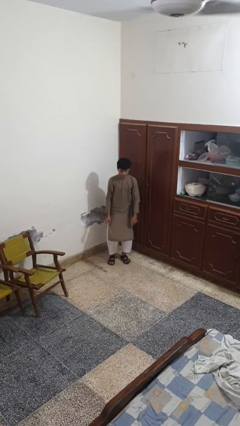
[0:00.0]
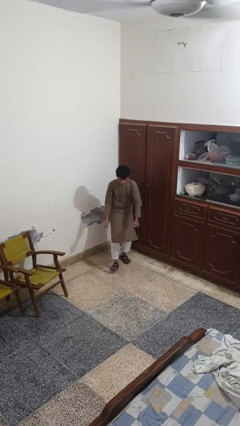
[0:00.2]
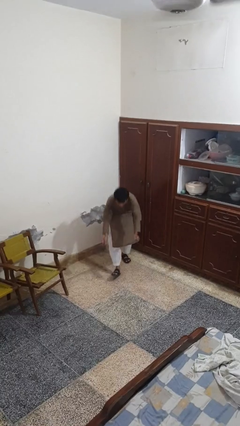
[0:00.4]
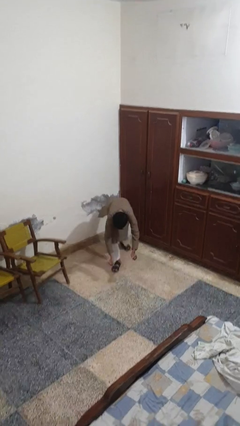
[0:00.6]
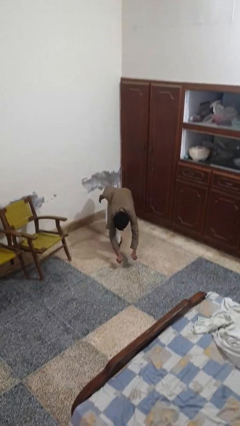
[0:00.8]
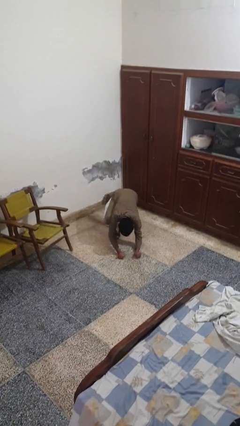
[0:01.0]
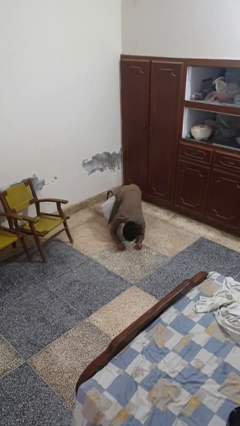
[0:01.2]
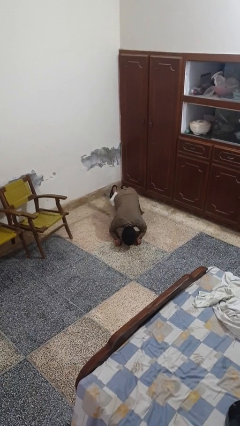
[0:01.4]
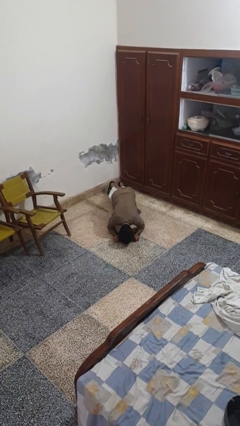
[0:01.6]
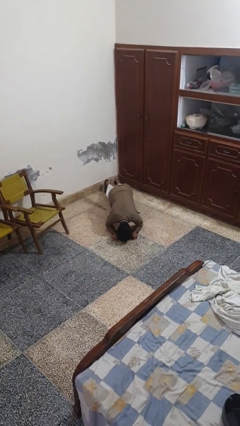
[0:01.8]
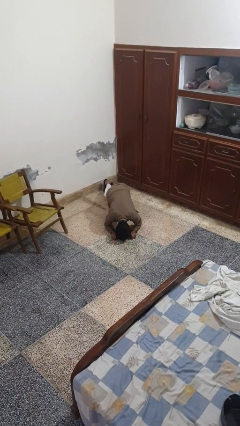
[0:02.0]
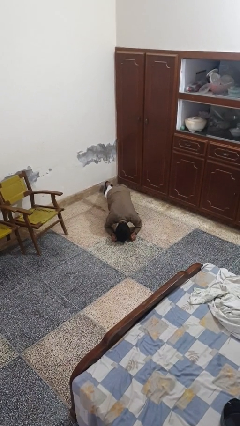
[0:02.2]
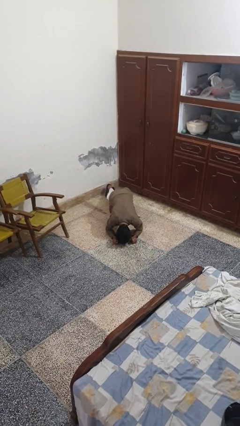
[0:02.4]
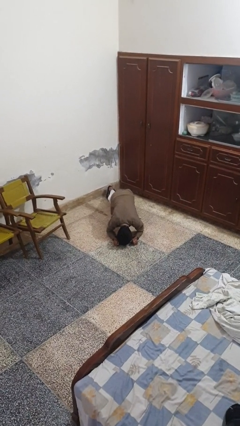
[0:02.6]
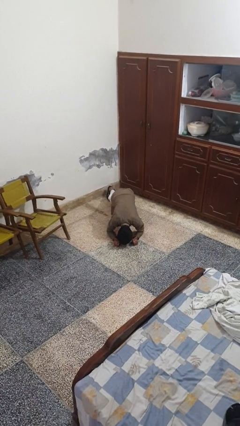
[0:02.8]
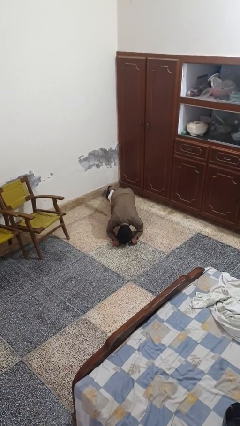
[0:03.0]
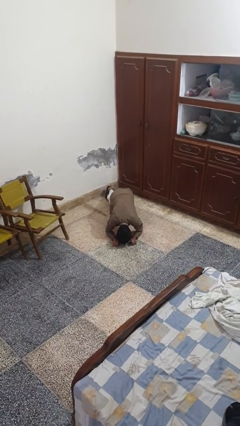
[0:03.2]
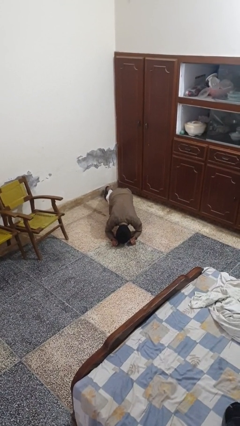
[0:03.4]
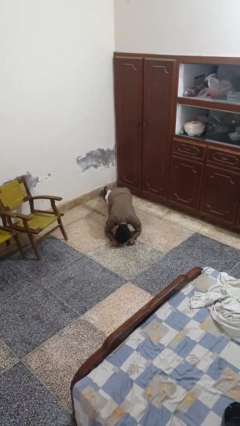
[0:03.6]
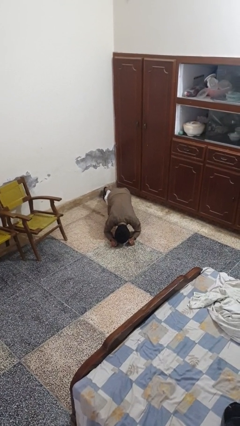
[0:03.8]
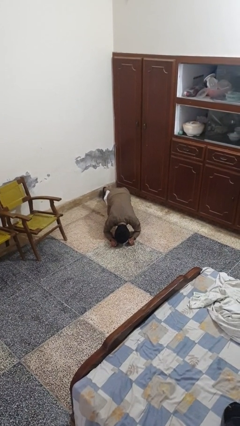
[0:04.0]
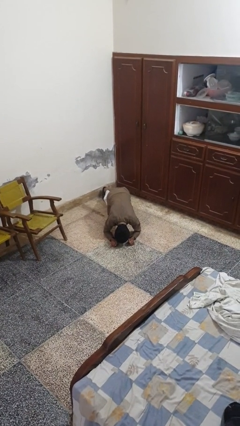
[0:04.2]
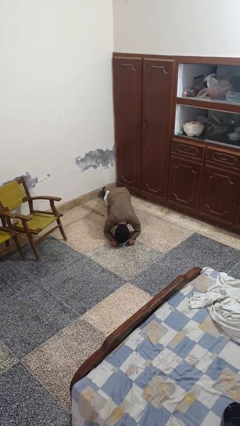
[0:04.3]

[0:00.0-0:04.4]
person exercises with plank

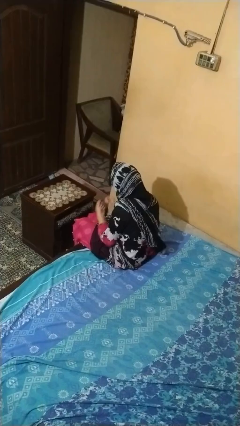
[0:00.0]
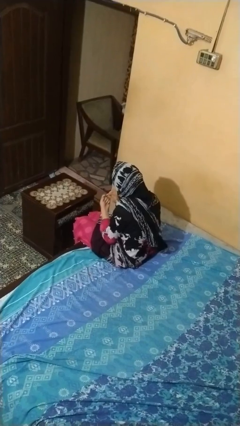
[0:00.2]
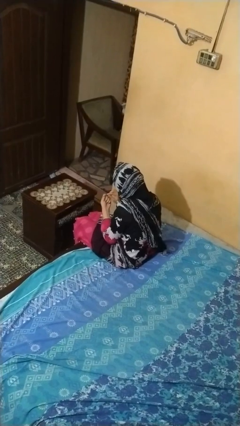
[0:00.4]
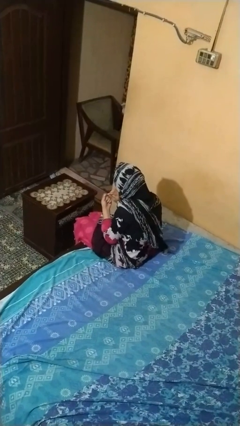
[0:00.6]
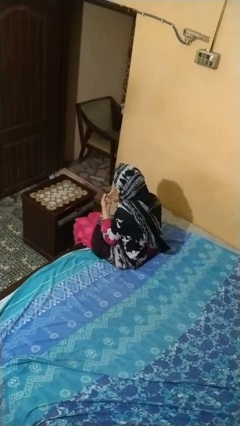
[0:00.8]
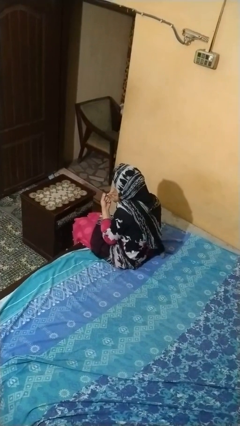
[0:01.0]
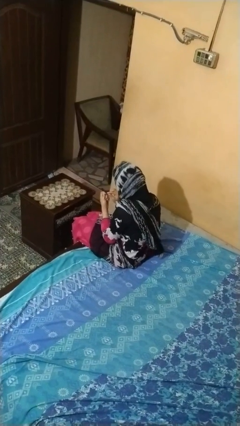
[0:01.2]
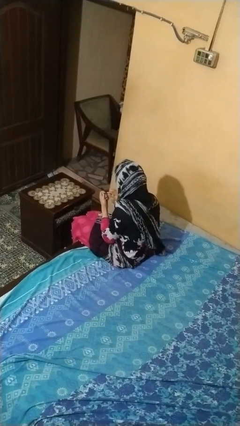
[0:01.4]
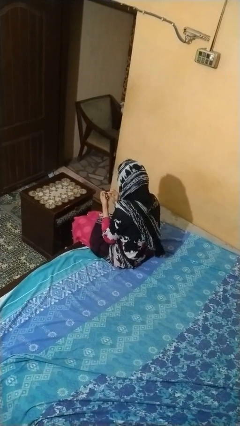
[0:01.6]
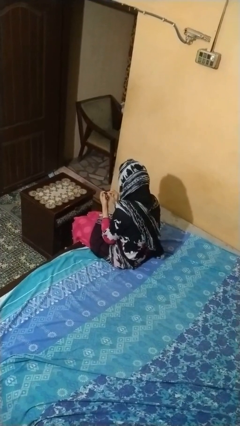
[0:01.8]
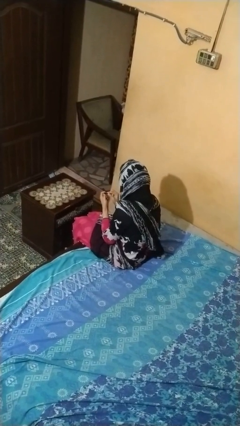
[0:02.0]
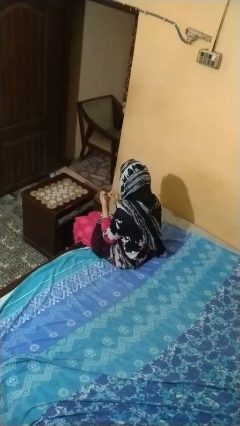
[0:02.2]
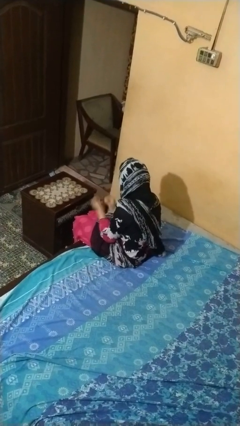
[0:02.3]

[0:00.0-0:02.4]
person files fingernails

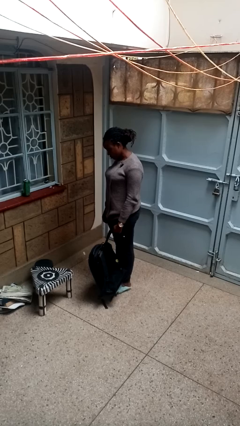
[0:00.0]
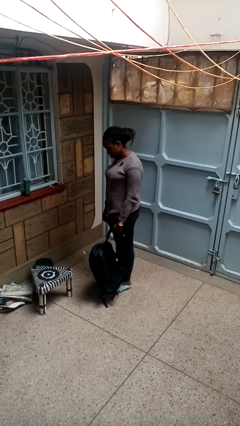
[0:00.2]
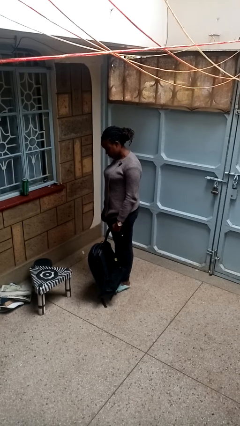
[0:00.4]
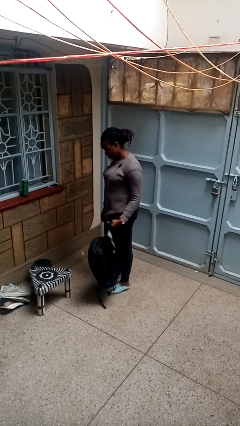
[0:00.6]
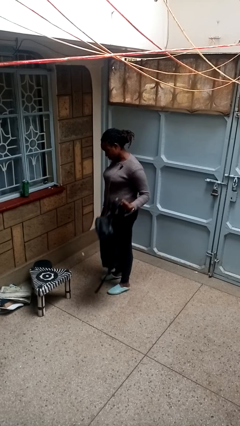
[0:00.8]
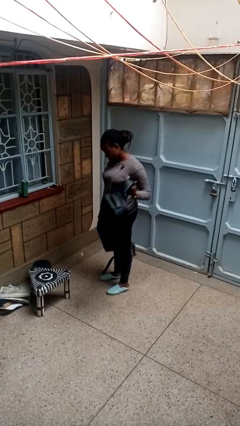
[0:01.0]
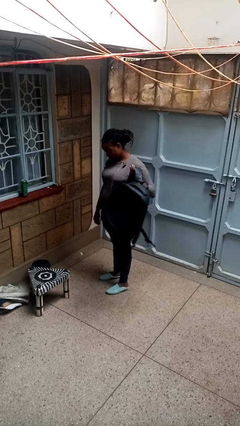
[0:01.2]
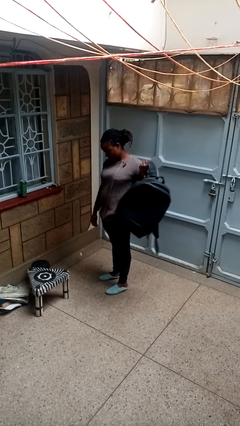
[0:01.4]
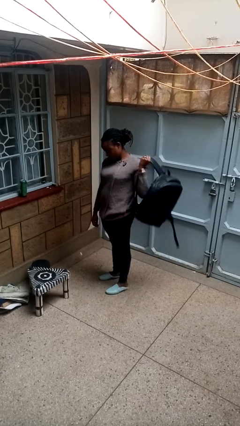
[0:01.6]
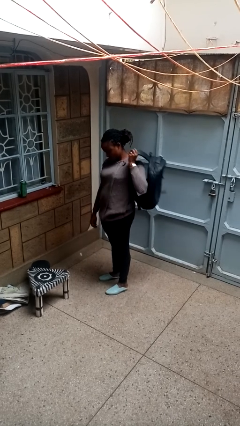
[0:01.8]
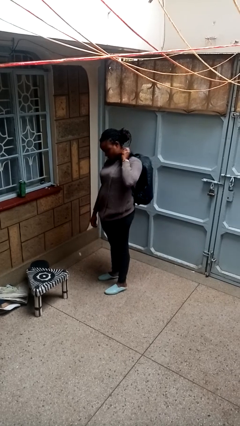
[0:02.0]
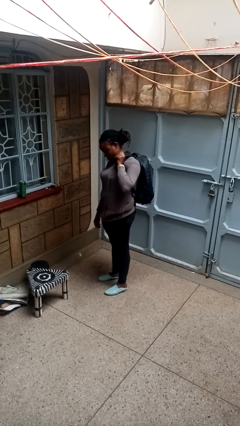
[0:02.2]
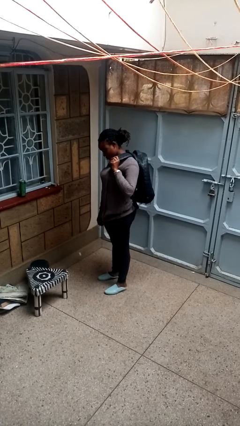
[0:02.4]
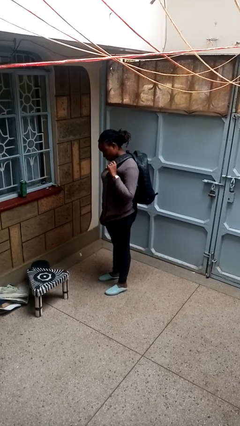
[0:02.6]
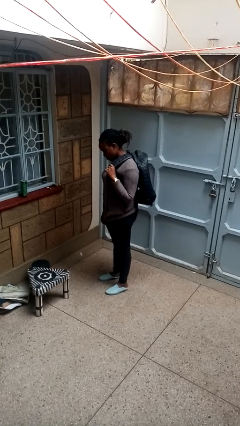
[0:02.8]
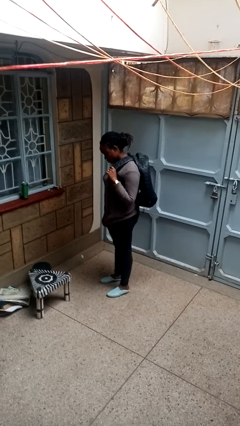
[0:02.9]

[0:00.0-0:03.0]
person puts on backpack

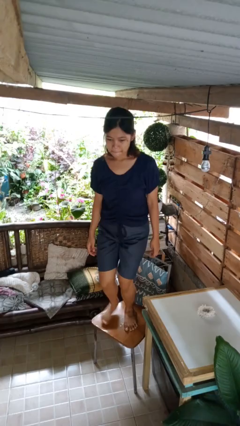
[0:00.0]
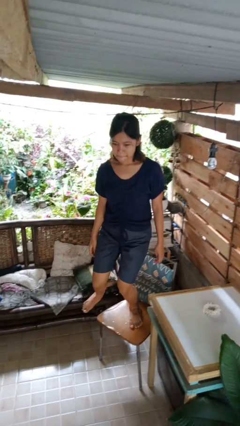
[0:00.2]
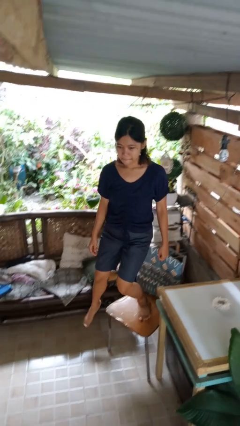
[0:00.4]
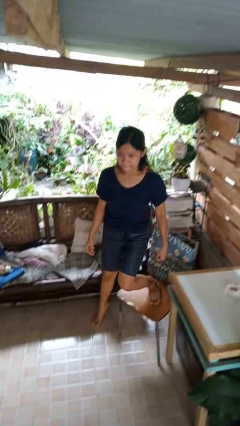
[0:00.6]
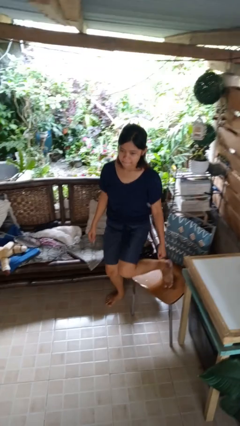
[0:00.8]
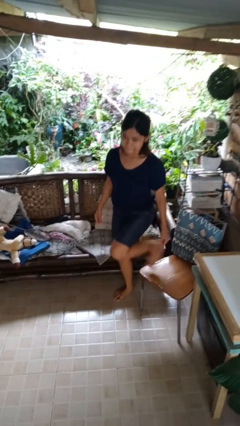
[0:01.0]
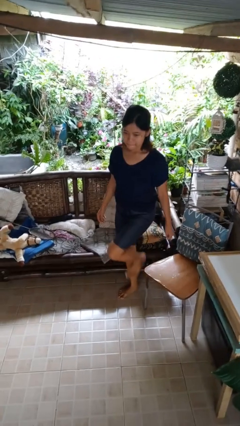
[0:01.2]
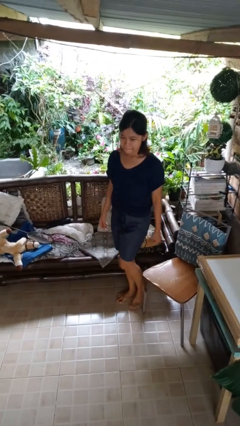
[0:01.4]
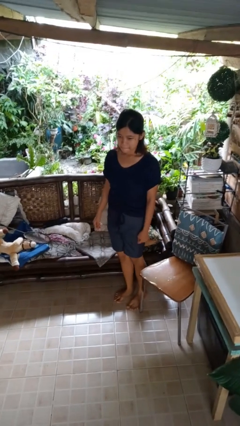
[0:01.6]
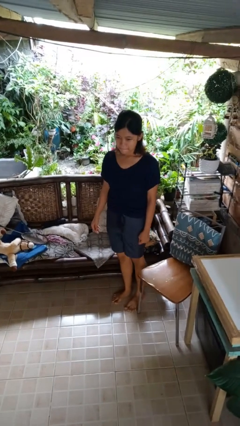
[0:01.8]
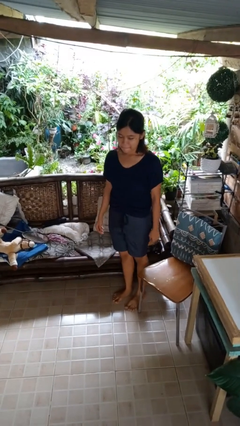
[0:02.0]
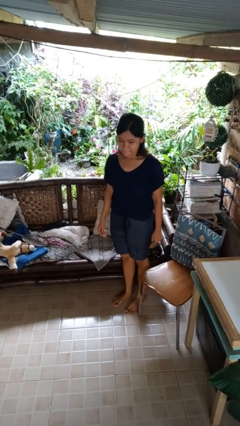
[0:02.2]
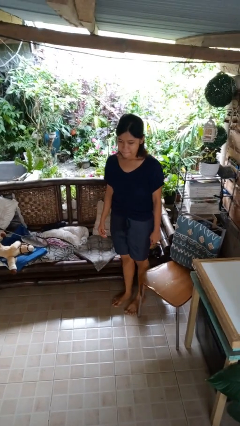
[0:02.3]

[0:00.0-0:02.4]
person climbs off chair

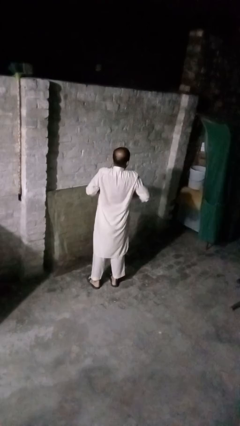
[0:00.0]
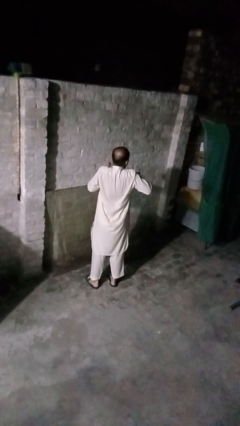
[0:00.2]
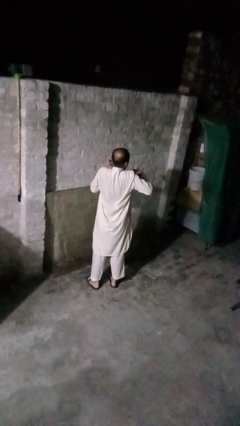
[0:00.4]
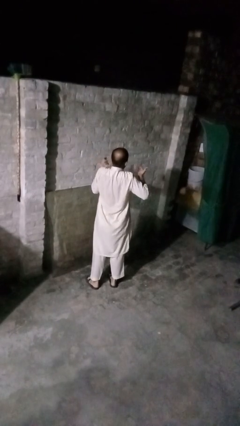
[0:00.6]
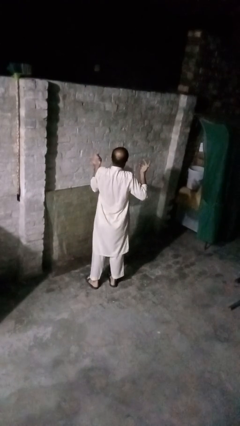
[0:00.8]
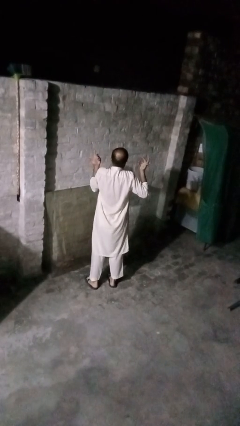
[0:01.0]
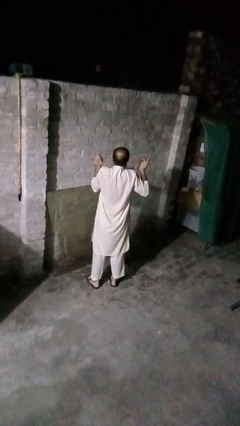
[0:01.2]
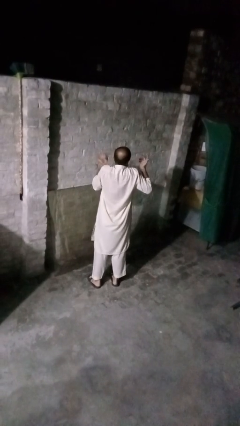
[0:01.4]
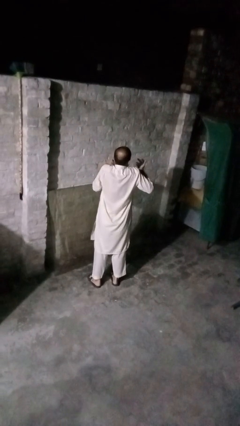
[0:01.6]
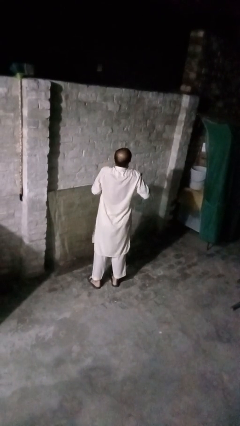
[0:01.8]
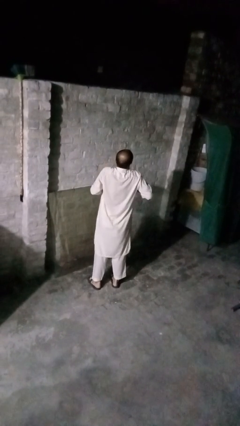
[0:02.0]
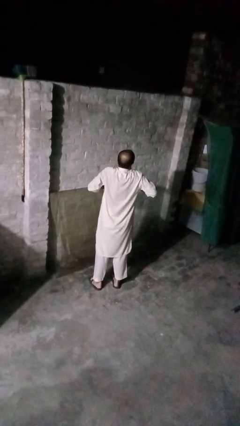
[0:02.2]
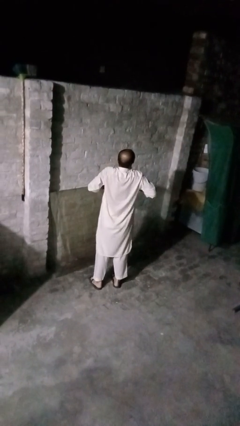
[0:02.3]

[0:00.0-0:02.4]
person shrugs

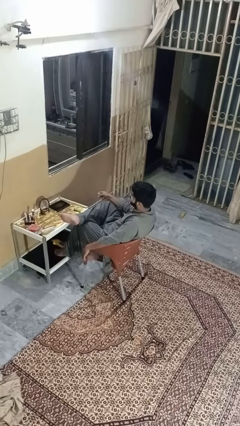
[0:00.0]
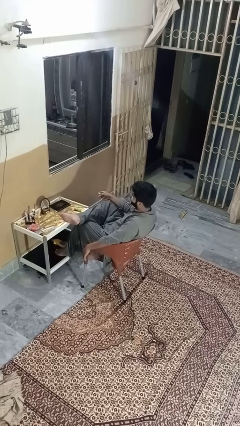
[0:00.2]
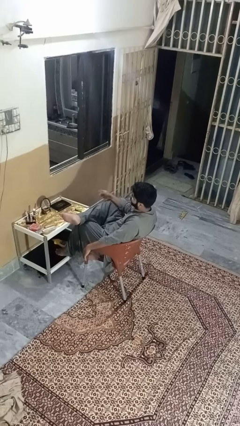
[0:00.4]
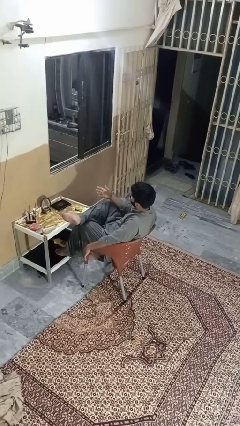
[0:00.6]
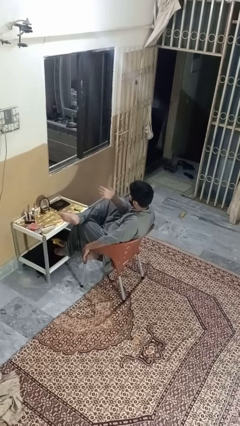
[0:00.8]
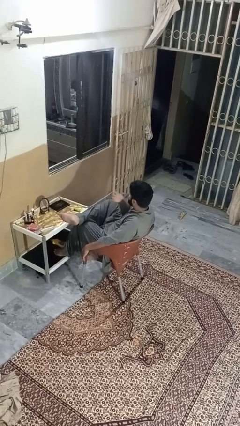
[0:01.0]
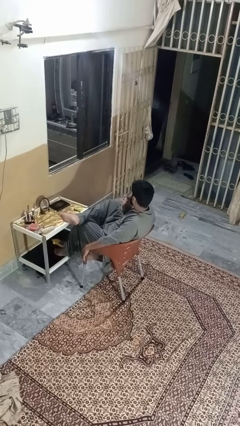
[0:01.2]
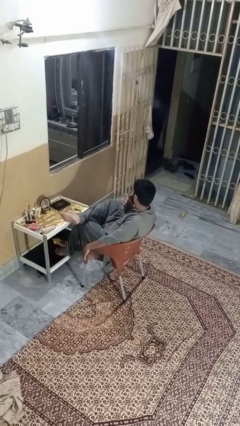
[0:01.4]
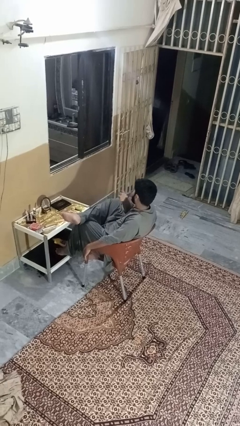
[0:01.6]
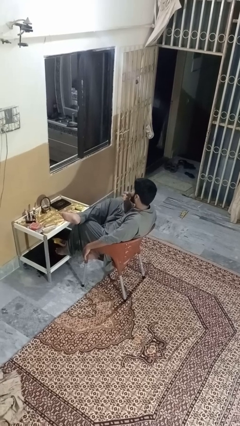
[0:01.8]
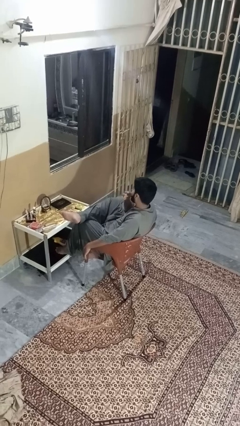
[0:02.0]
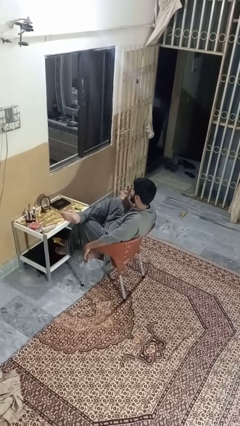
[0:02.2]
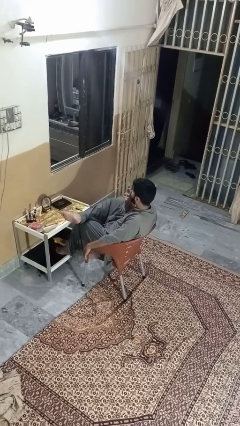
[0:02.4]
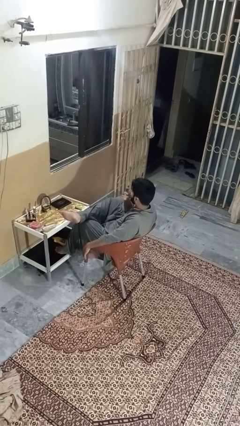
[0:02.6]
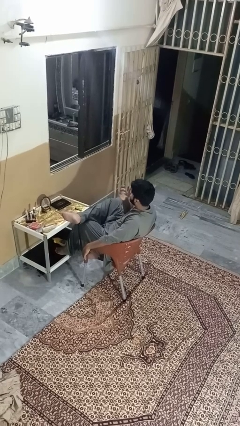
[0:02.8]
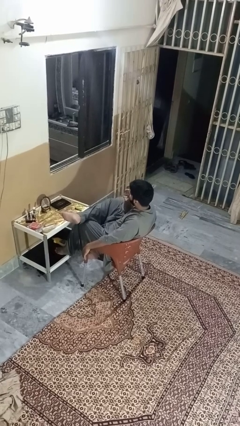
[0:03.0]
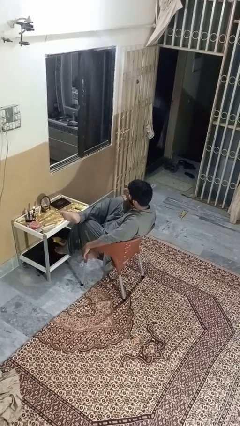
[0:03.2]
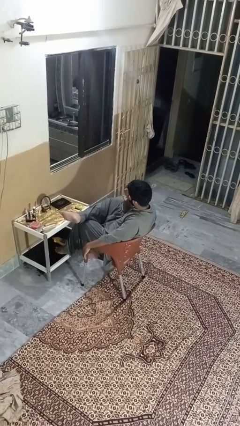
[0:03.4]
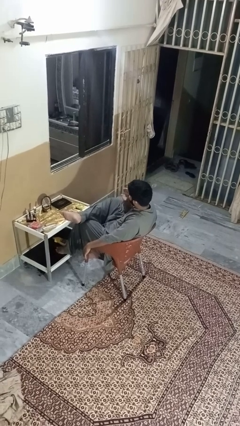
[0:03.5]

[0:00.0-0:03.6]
person licks fingers
